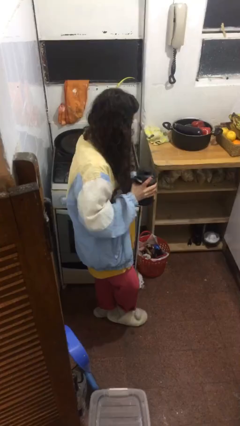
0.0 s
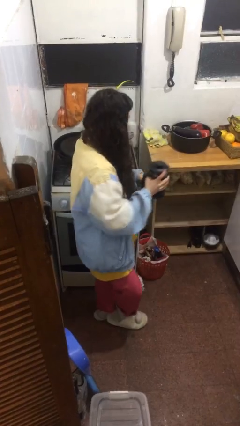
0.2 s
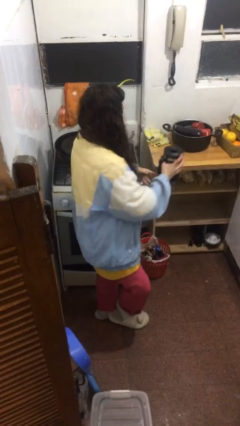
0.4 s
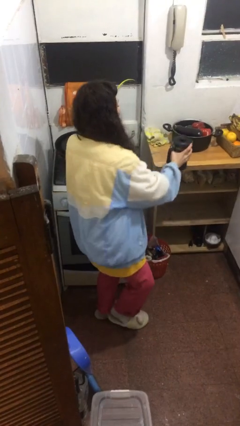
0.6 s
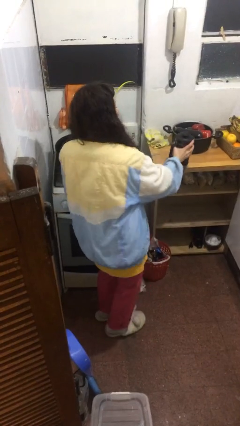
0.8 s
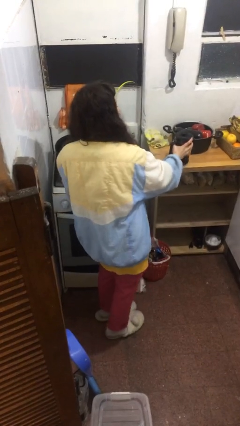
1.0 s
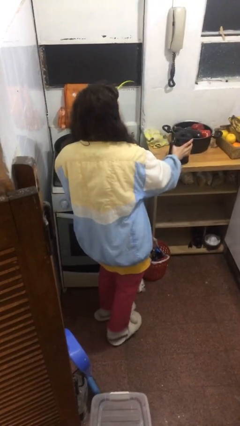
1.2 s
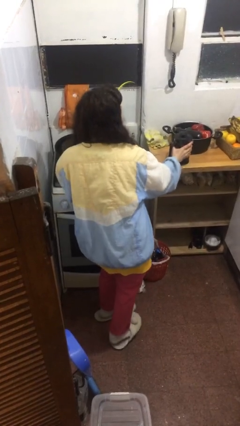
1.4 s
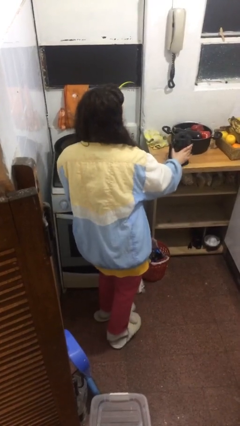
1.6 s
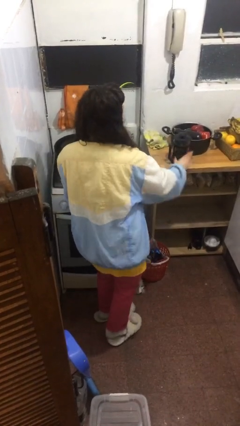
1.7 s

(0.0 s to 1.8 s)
person puts down object on countertop

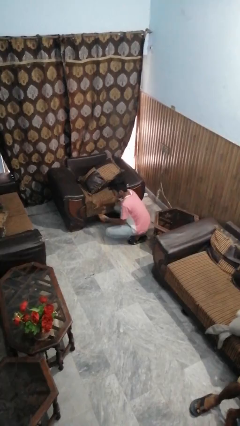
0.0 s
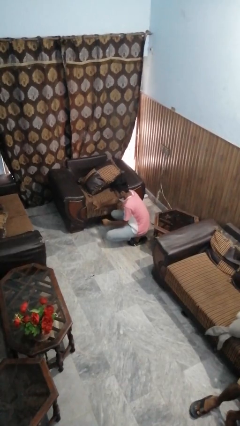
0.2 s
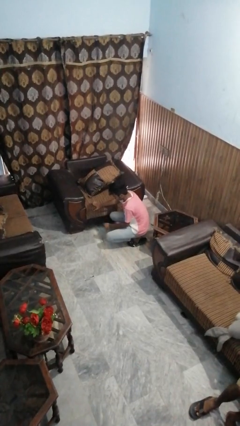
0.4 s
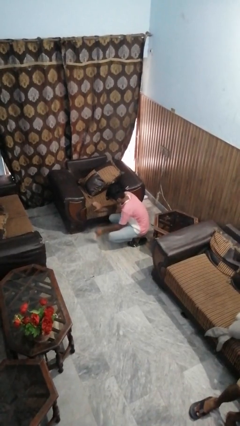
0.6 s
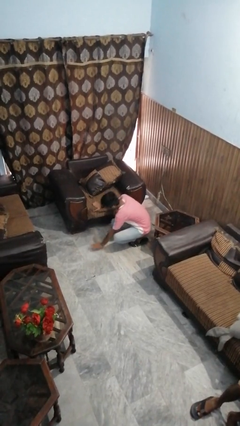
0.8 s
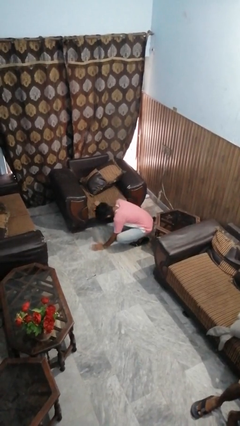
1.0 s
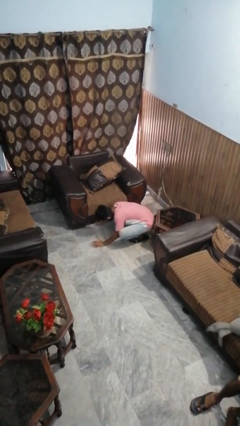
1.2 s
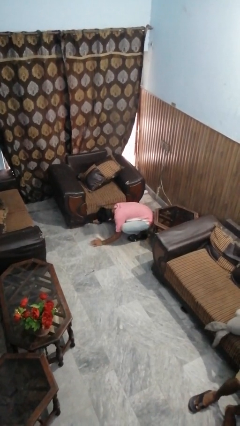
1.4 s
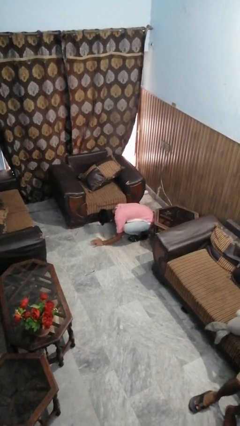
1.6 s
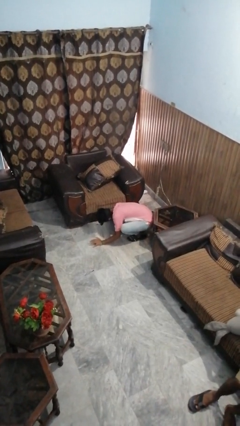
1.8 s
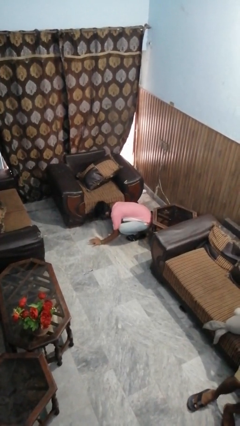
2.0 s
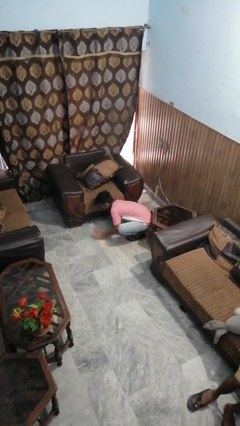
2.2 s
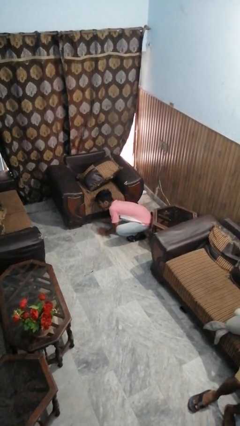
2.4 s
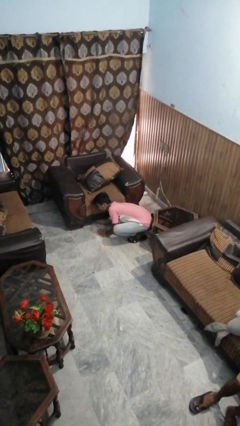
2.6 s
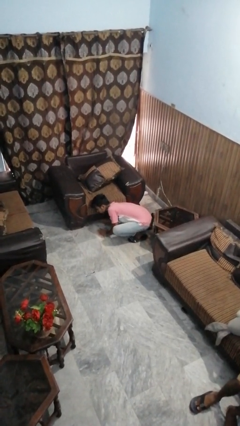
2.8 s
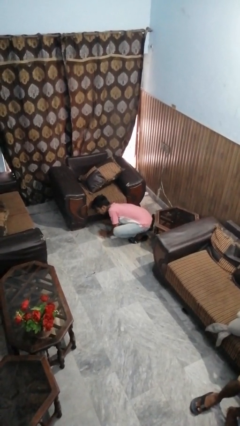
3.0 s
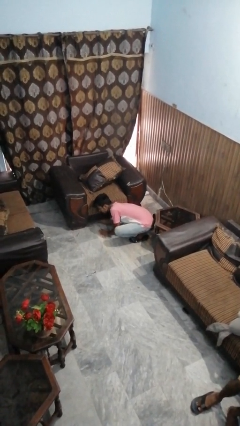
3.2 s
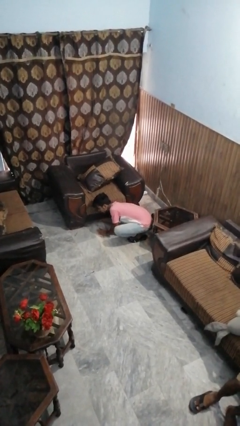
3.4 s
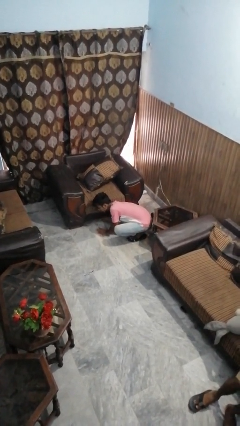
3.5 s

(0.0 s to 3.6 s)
person searches under couch

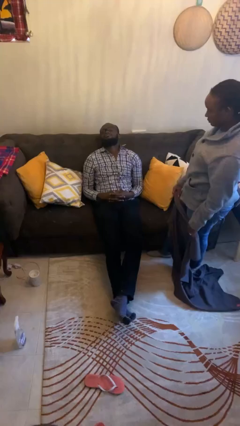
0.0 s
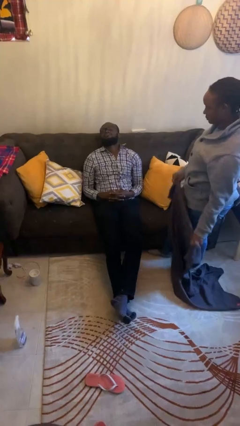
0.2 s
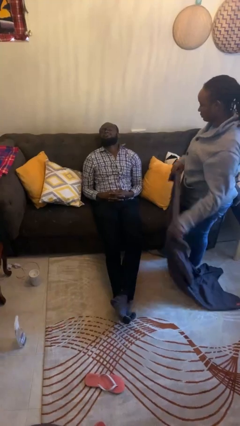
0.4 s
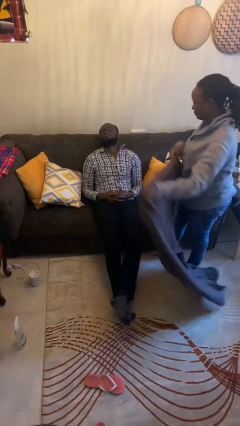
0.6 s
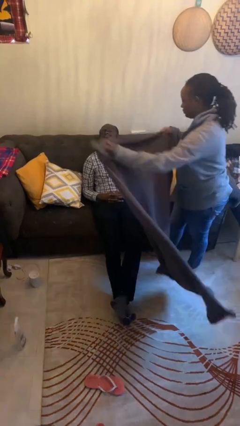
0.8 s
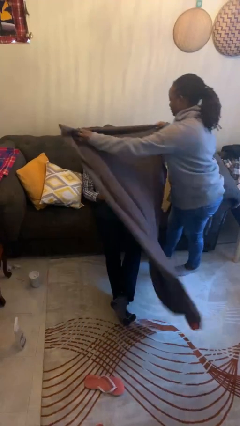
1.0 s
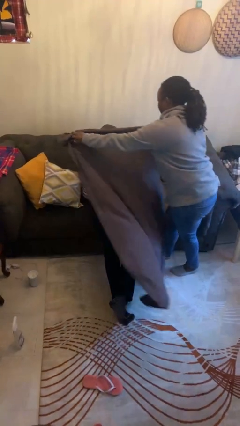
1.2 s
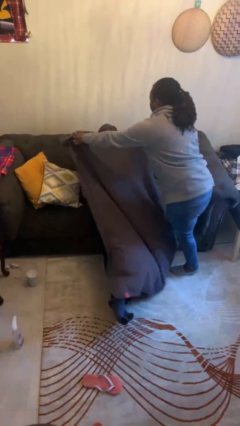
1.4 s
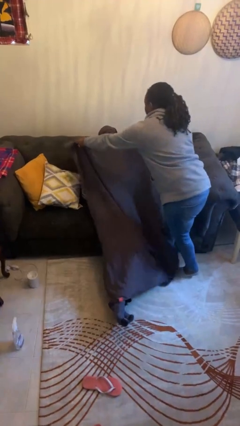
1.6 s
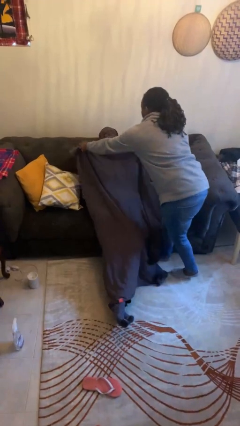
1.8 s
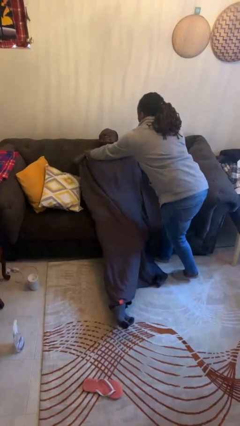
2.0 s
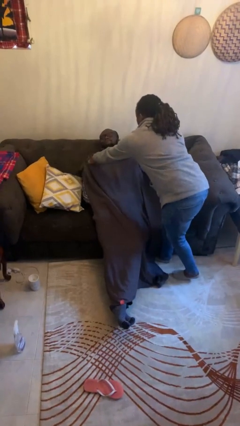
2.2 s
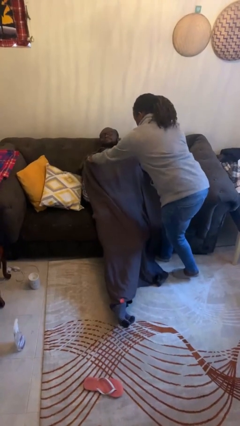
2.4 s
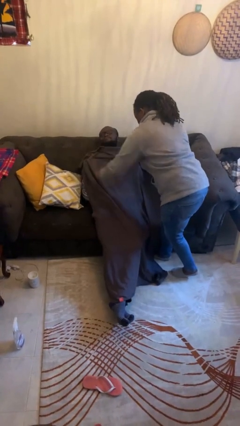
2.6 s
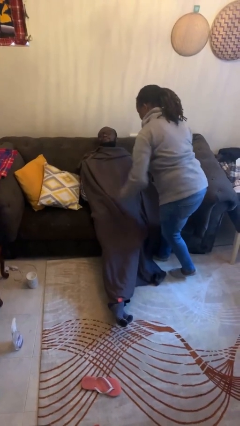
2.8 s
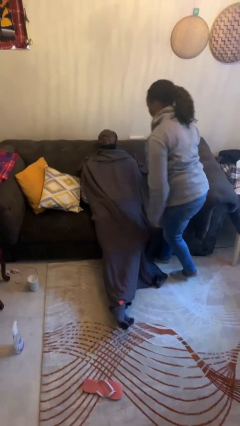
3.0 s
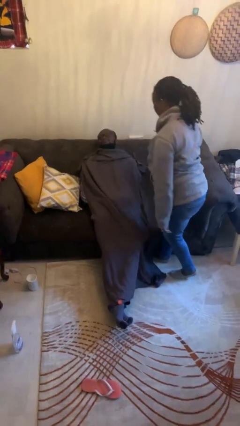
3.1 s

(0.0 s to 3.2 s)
person covers friend with blanket

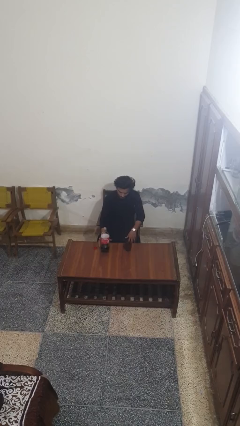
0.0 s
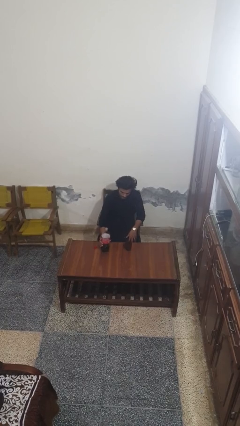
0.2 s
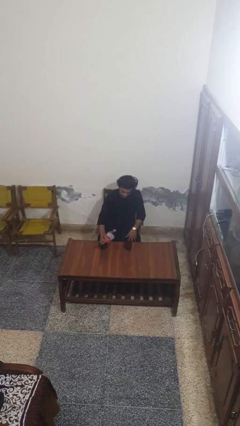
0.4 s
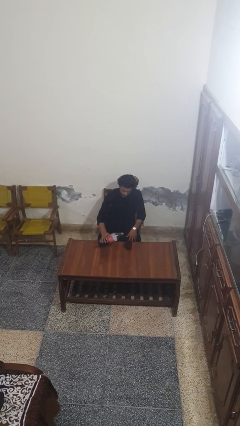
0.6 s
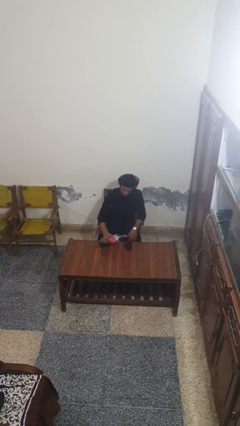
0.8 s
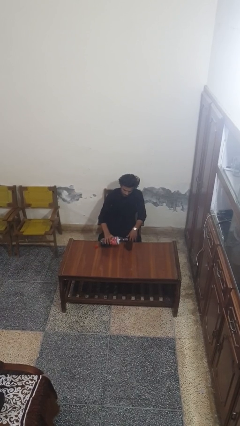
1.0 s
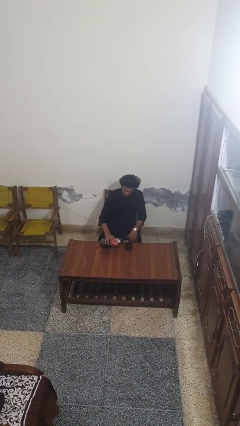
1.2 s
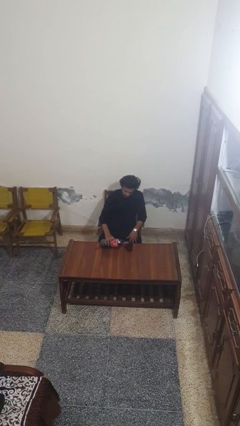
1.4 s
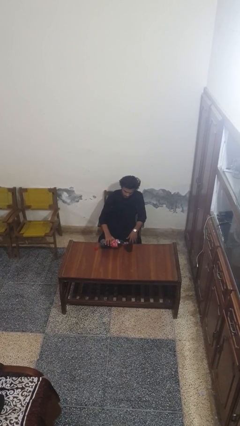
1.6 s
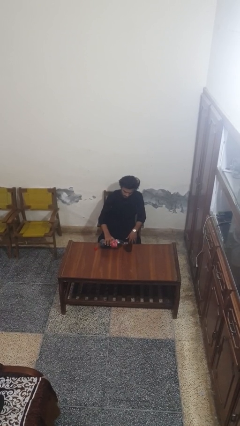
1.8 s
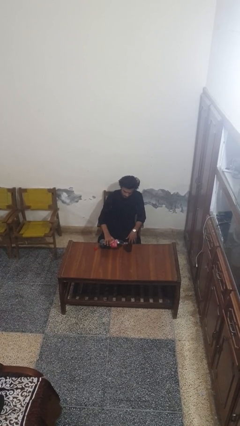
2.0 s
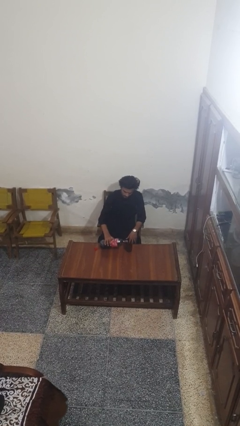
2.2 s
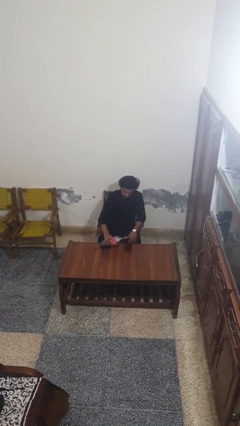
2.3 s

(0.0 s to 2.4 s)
person pours liquid into cup

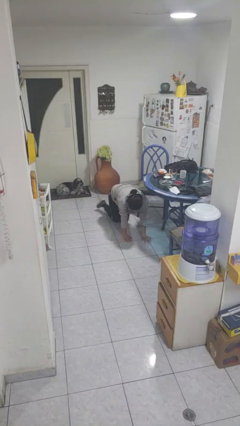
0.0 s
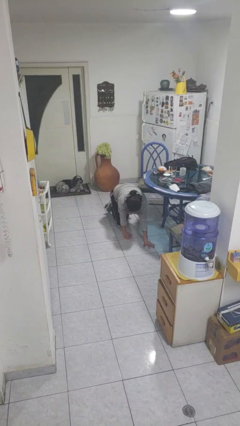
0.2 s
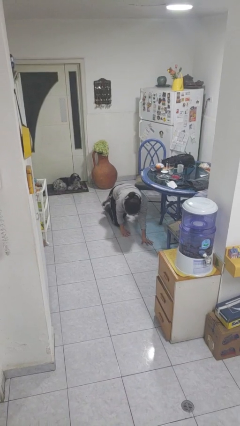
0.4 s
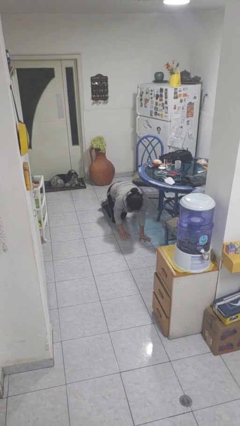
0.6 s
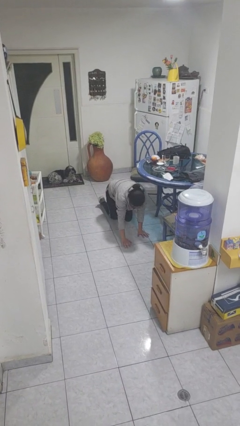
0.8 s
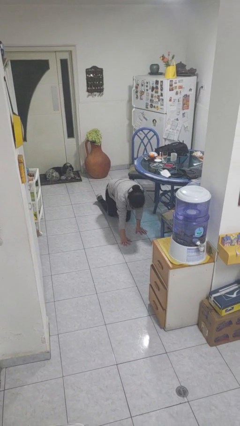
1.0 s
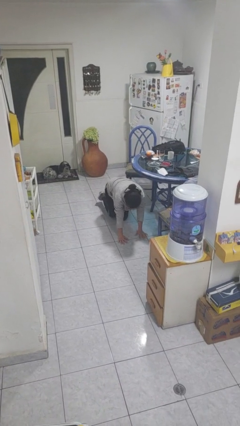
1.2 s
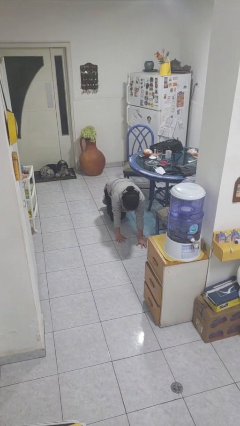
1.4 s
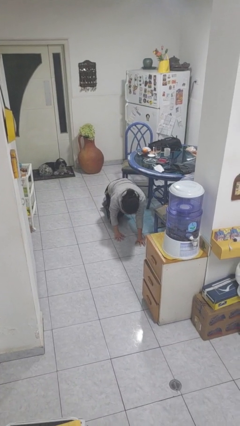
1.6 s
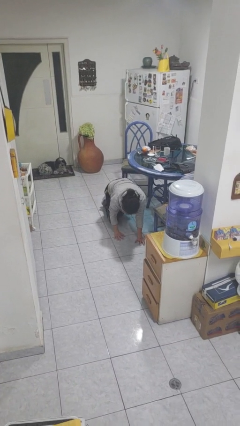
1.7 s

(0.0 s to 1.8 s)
person crawls

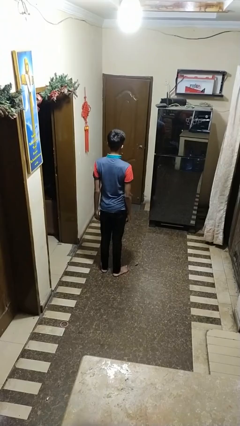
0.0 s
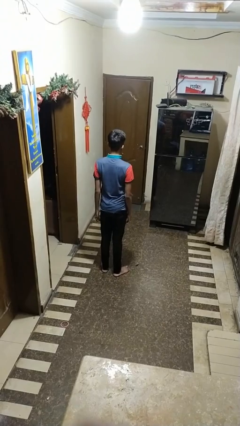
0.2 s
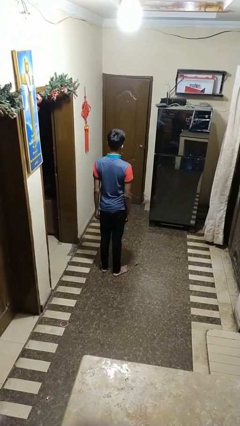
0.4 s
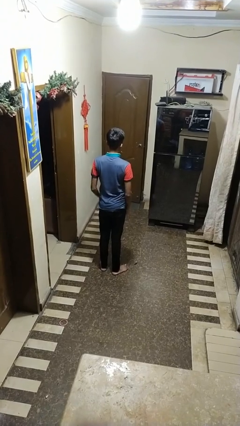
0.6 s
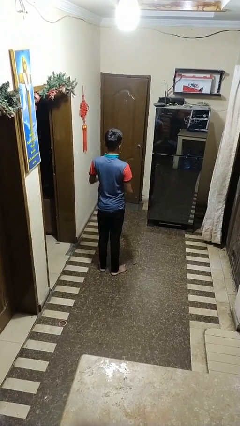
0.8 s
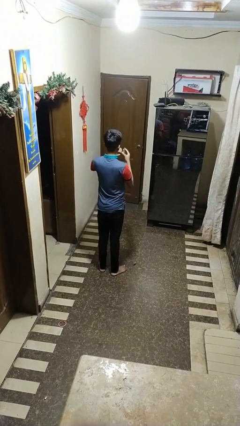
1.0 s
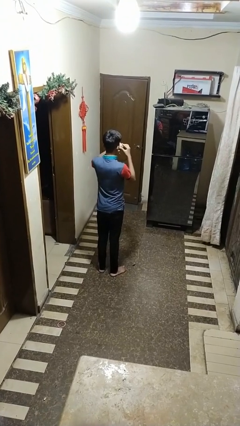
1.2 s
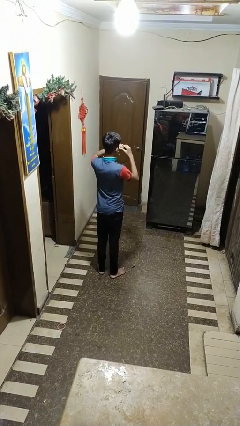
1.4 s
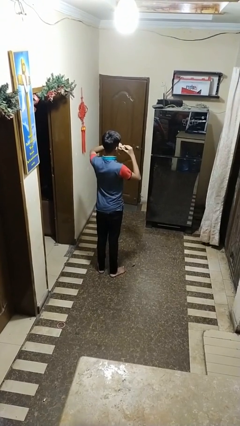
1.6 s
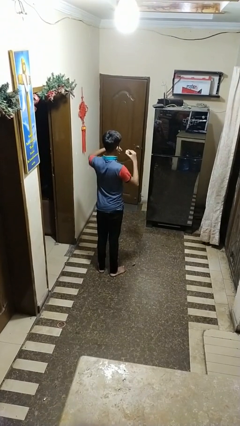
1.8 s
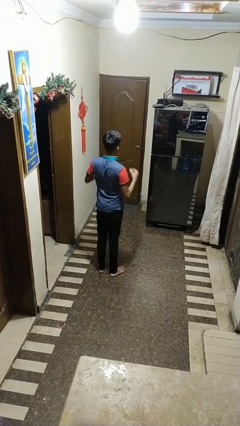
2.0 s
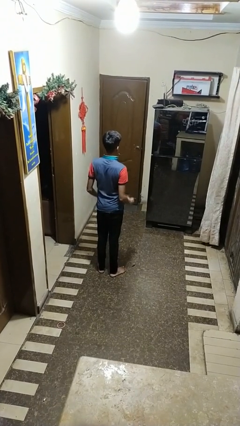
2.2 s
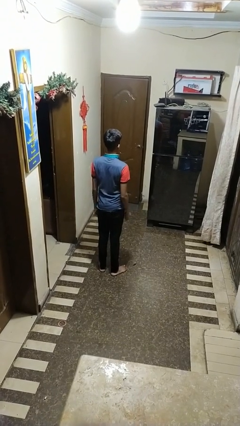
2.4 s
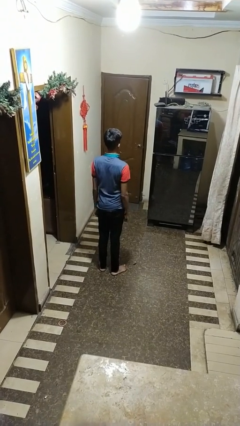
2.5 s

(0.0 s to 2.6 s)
person takes off ring

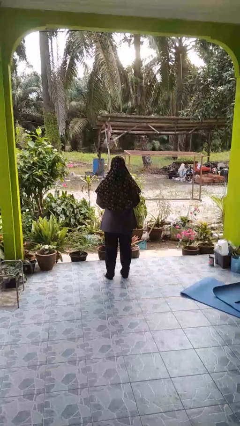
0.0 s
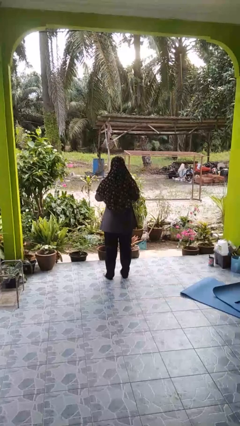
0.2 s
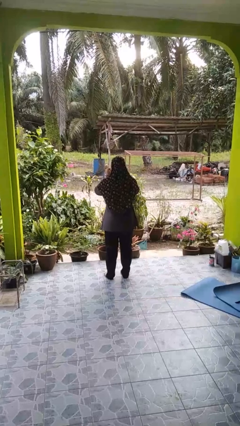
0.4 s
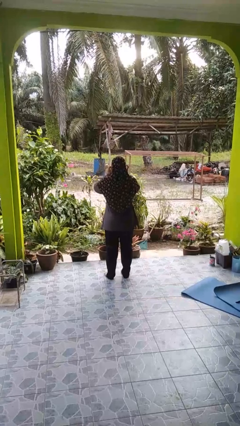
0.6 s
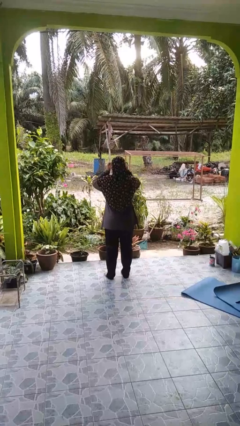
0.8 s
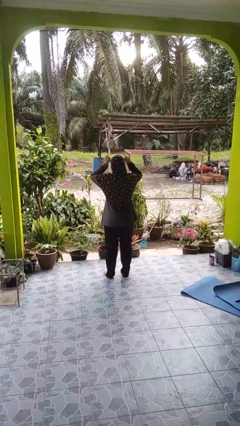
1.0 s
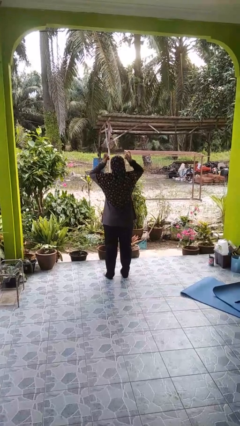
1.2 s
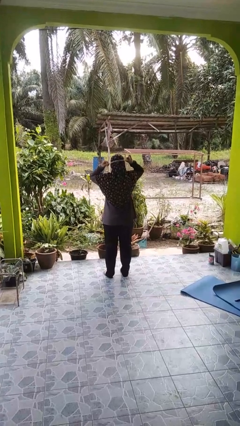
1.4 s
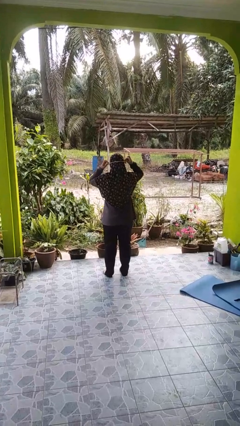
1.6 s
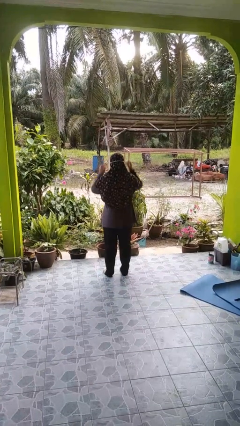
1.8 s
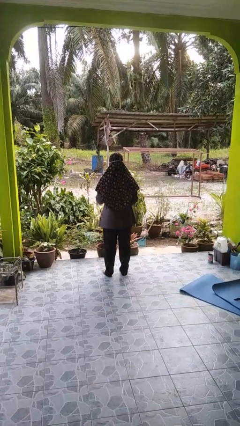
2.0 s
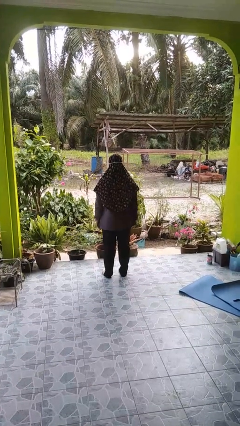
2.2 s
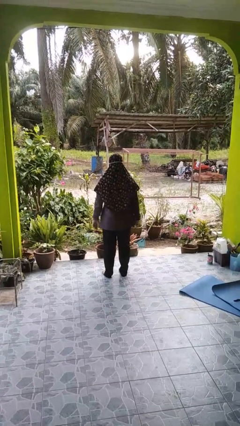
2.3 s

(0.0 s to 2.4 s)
person puts on facemask
